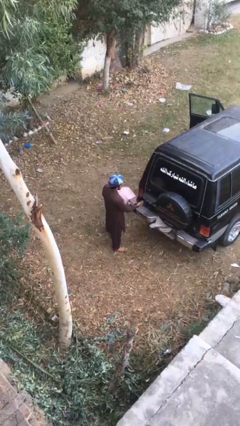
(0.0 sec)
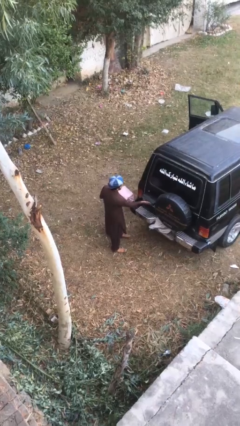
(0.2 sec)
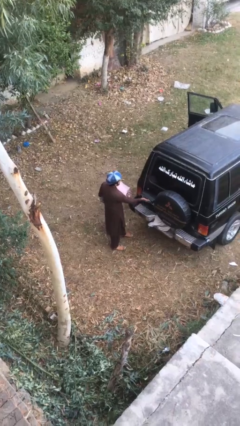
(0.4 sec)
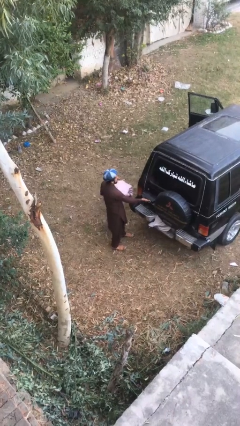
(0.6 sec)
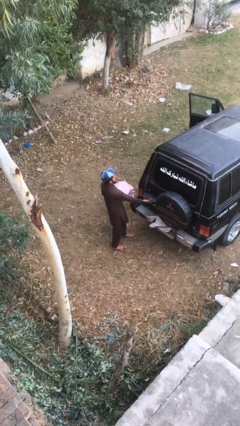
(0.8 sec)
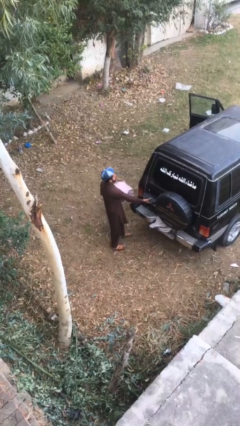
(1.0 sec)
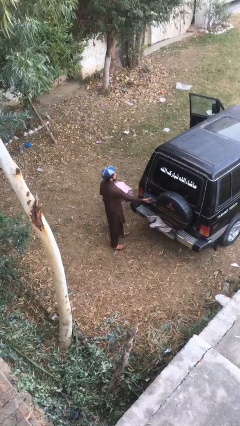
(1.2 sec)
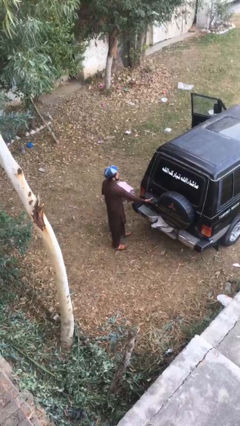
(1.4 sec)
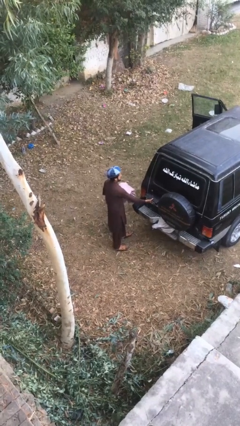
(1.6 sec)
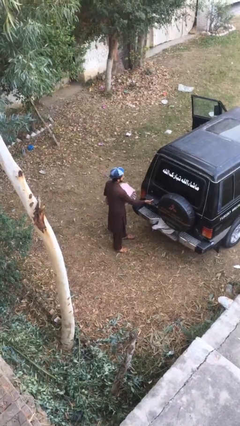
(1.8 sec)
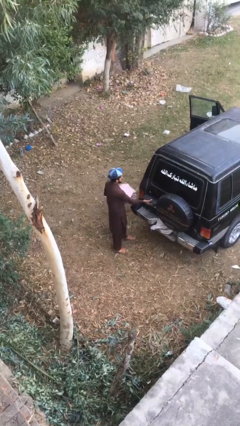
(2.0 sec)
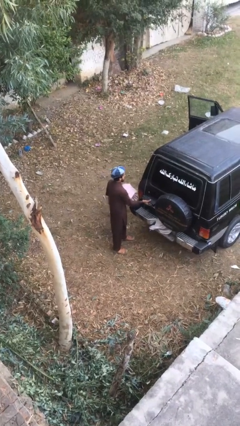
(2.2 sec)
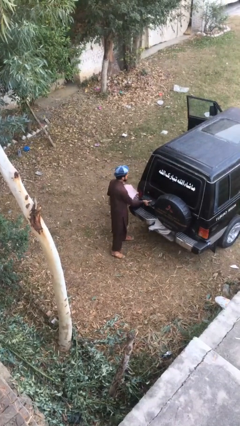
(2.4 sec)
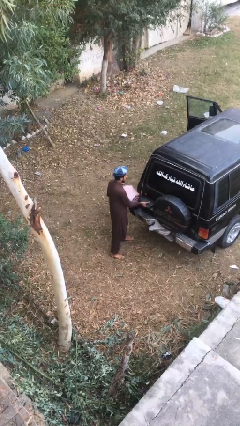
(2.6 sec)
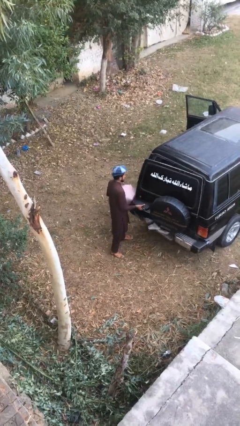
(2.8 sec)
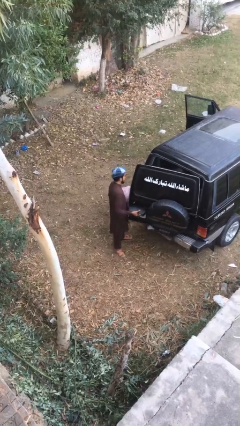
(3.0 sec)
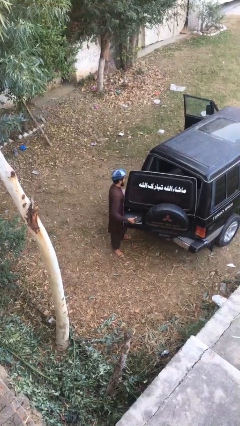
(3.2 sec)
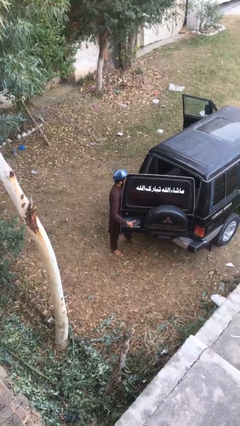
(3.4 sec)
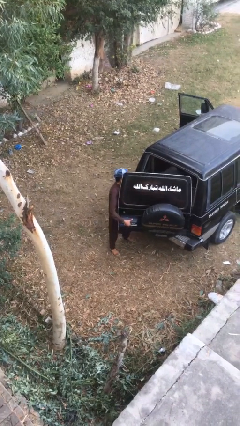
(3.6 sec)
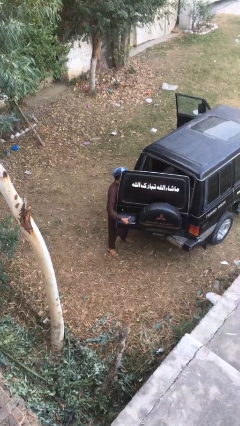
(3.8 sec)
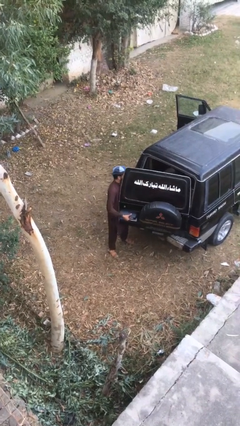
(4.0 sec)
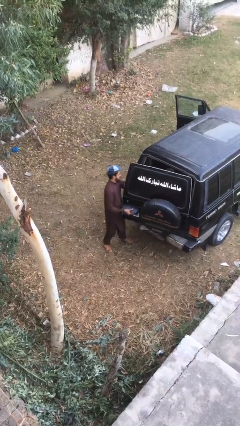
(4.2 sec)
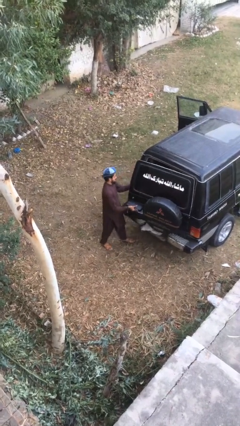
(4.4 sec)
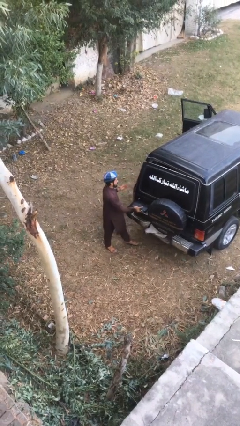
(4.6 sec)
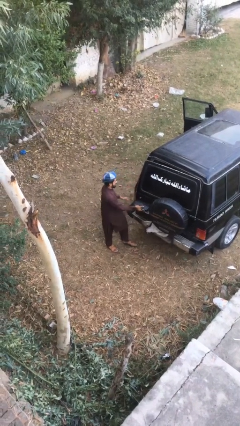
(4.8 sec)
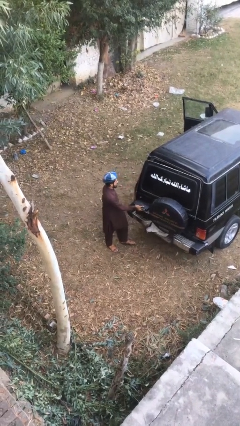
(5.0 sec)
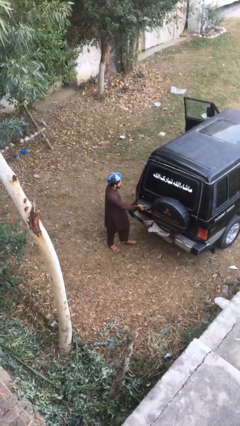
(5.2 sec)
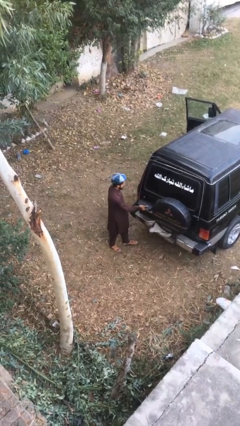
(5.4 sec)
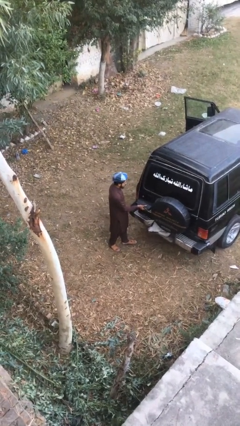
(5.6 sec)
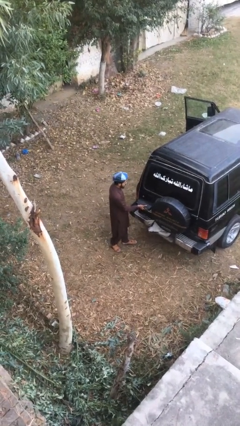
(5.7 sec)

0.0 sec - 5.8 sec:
person loads car

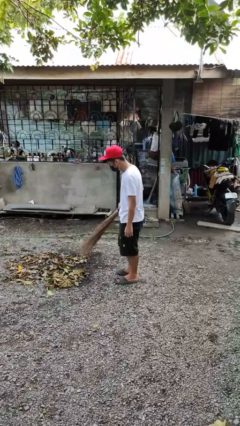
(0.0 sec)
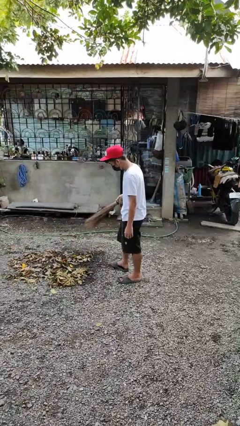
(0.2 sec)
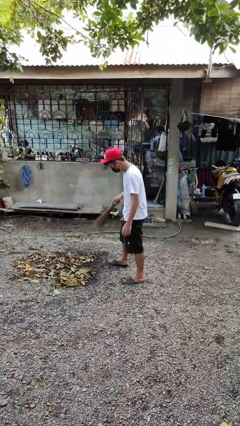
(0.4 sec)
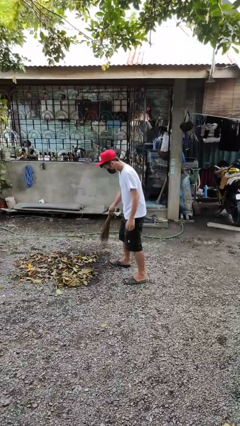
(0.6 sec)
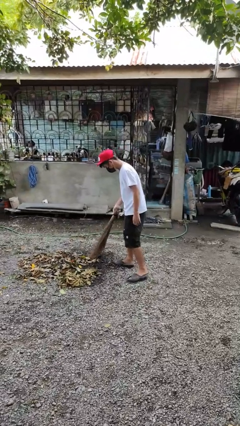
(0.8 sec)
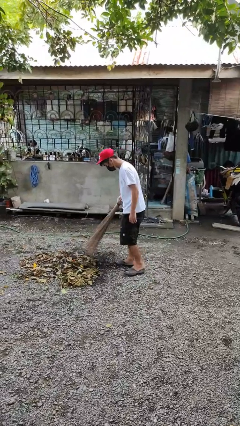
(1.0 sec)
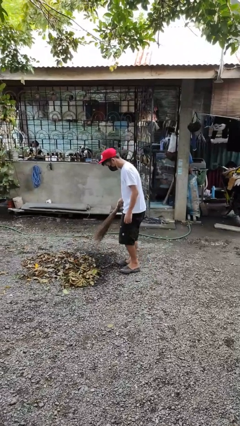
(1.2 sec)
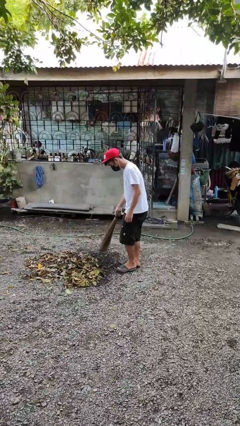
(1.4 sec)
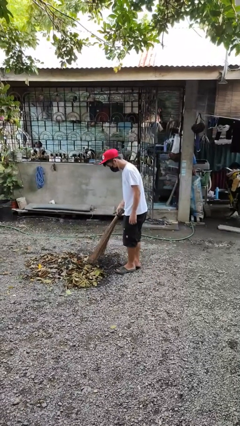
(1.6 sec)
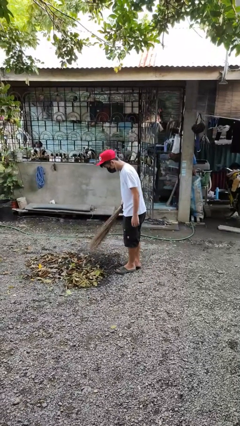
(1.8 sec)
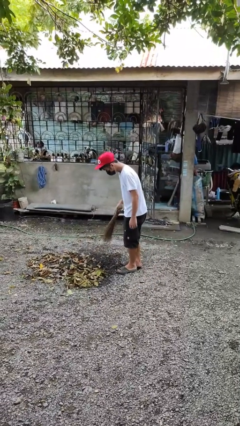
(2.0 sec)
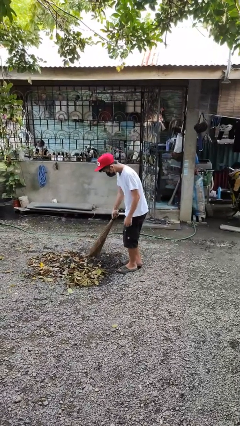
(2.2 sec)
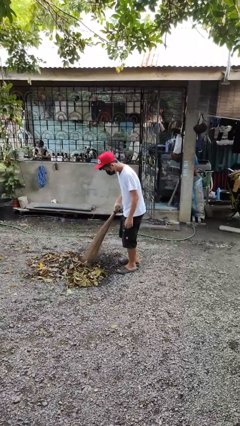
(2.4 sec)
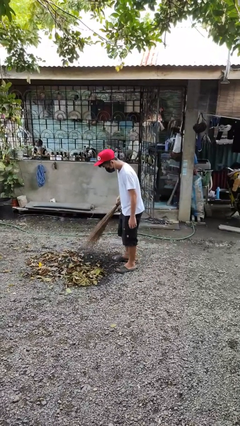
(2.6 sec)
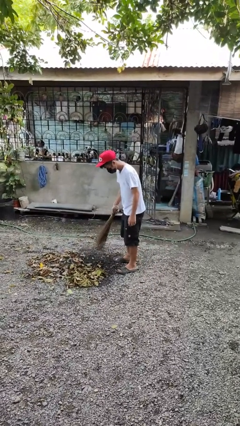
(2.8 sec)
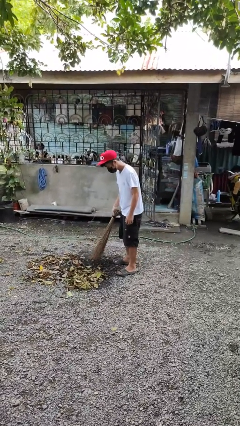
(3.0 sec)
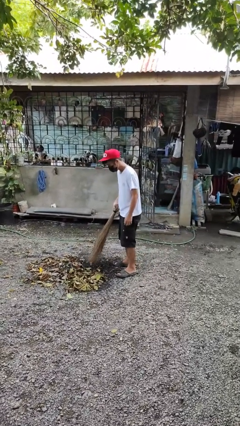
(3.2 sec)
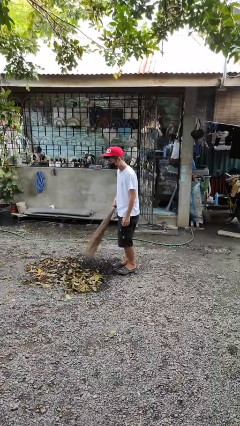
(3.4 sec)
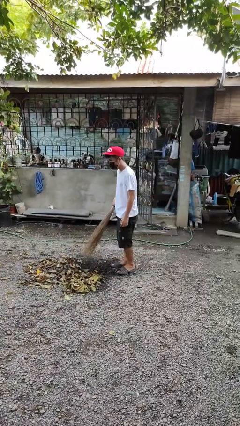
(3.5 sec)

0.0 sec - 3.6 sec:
person sweeps floor

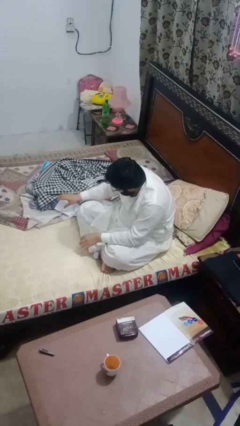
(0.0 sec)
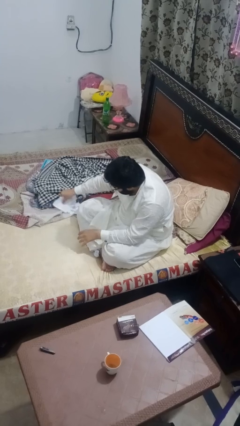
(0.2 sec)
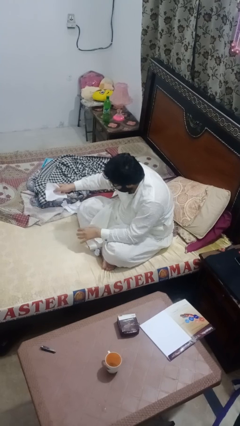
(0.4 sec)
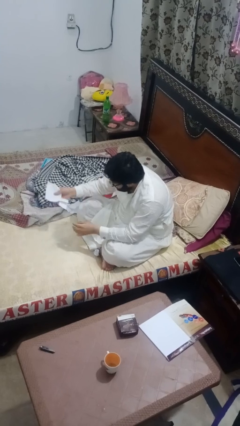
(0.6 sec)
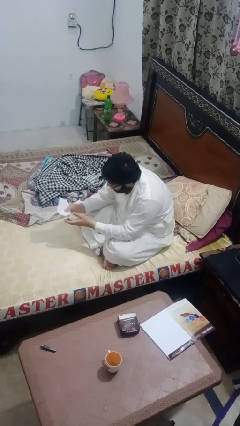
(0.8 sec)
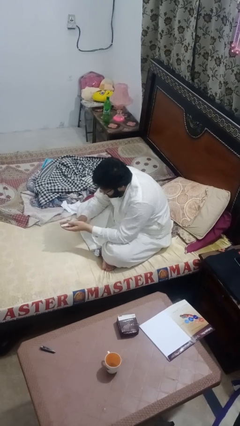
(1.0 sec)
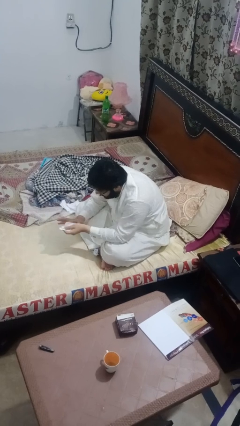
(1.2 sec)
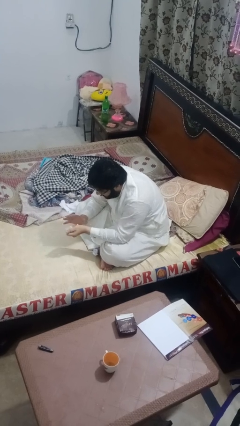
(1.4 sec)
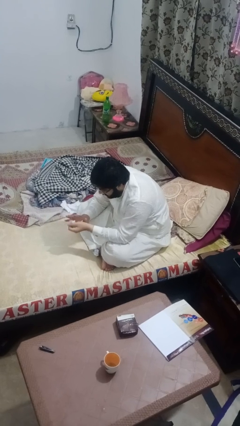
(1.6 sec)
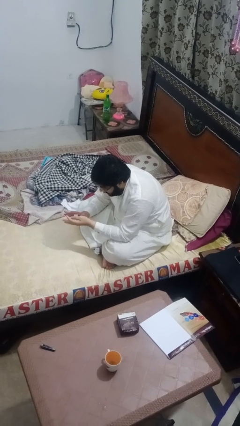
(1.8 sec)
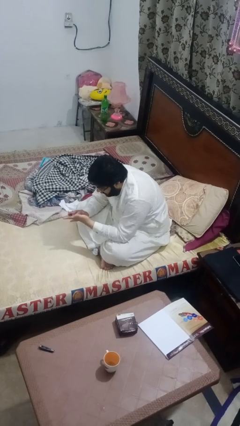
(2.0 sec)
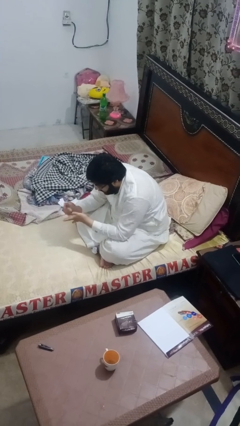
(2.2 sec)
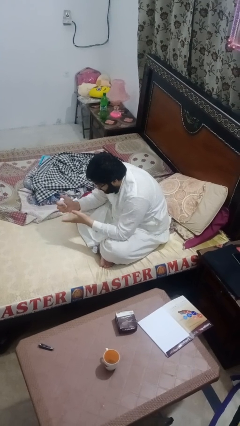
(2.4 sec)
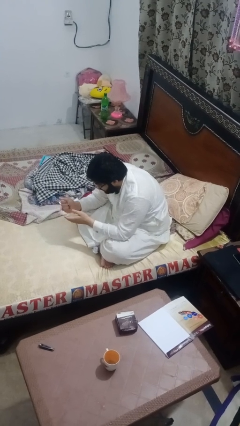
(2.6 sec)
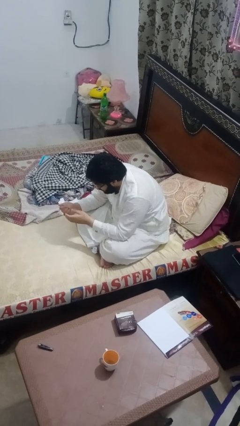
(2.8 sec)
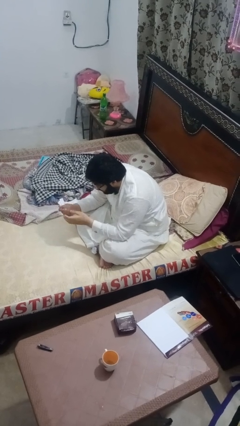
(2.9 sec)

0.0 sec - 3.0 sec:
person crumples paper

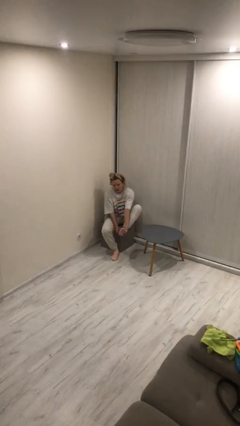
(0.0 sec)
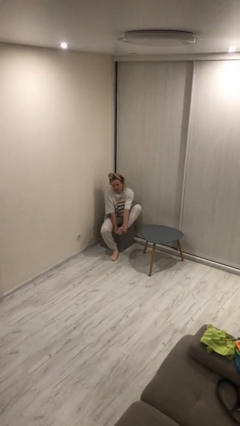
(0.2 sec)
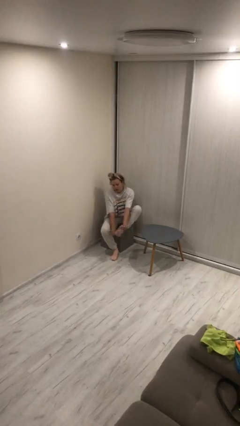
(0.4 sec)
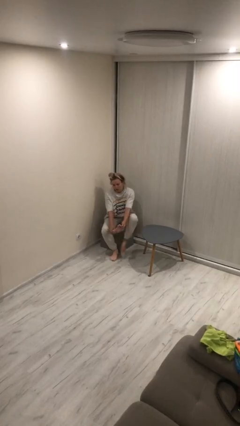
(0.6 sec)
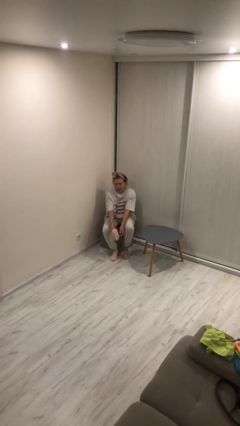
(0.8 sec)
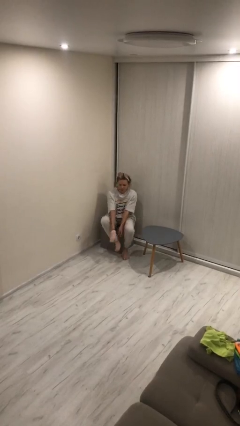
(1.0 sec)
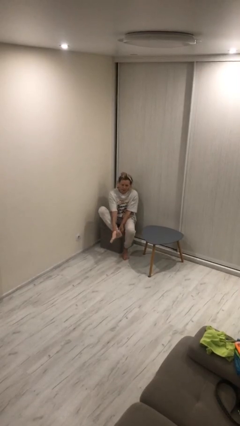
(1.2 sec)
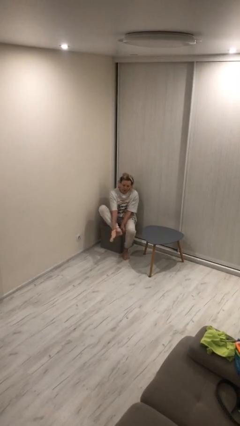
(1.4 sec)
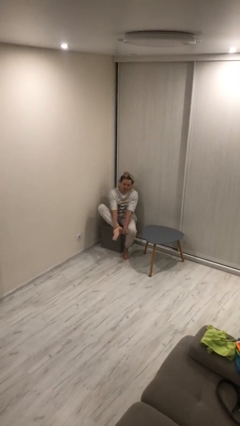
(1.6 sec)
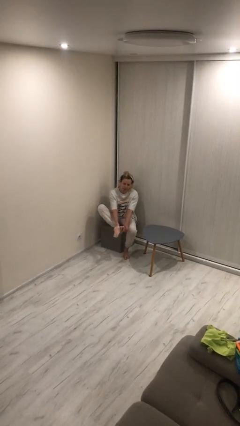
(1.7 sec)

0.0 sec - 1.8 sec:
person takes off socks

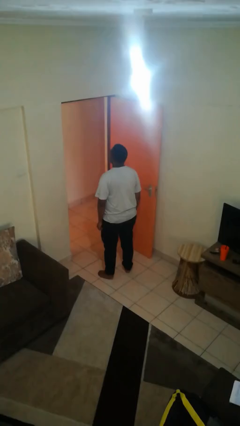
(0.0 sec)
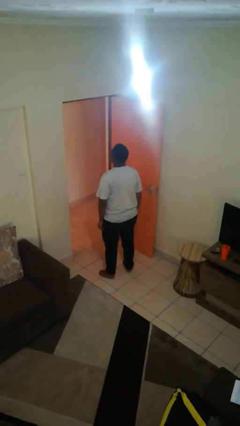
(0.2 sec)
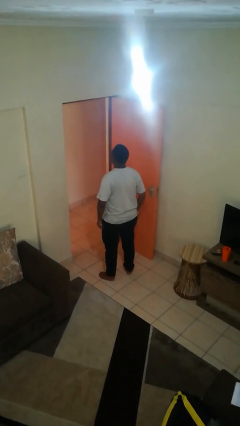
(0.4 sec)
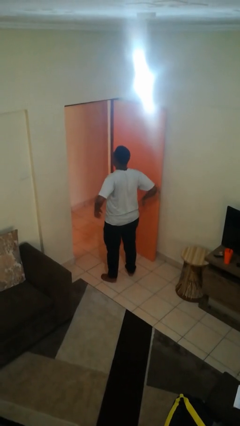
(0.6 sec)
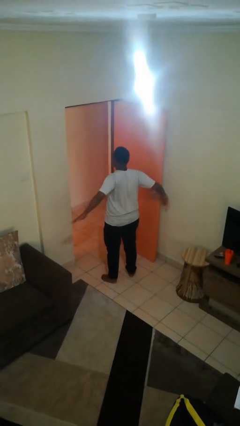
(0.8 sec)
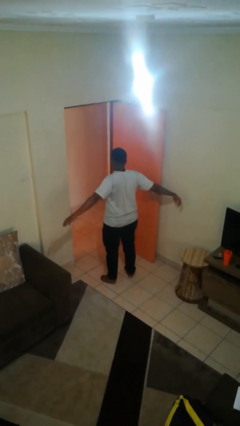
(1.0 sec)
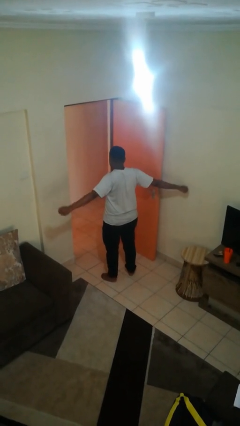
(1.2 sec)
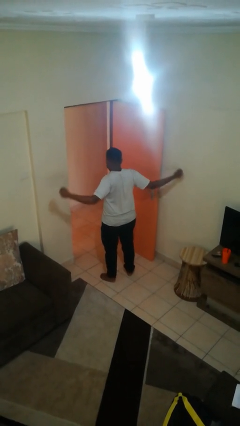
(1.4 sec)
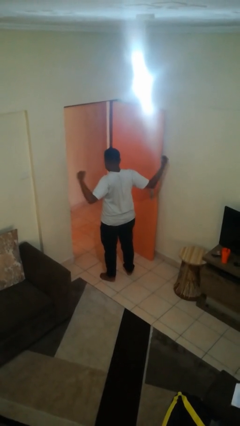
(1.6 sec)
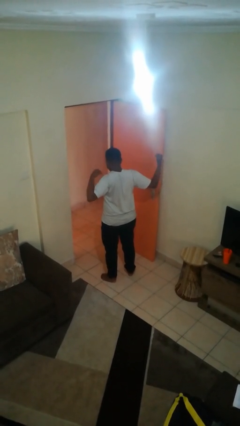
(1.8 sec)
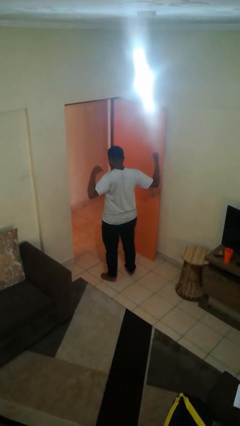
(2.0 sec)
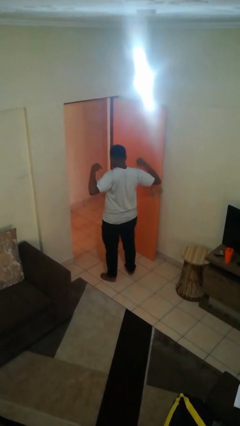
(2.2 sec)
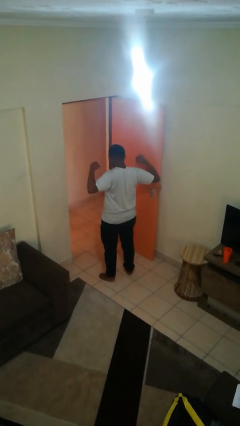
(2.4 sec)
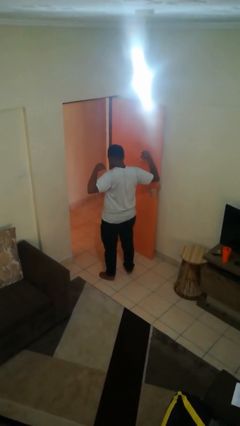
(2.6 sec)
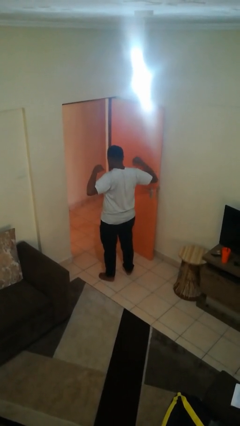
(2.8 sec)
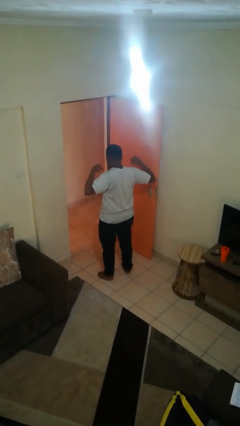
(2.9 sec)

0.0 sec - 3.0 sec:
person stretches arms to side

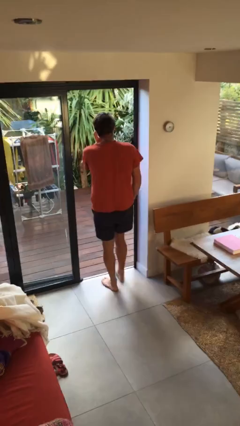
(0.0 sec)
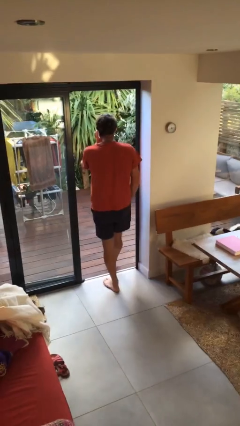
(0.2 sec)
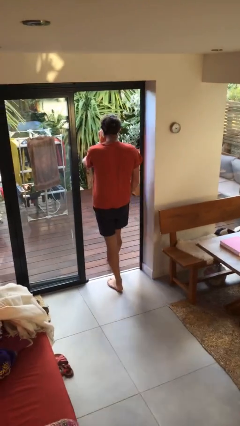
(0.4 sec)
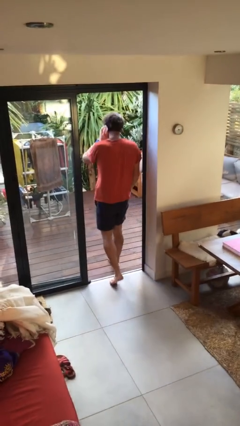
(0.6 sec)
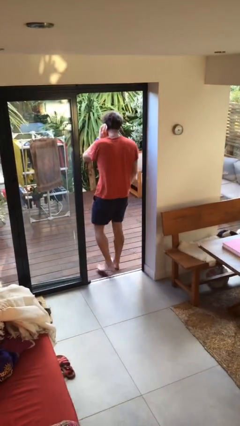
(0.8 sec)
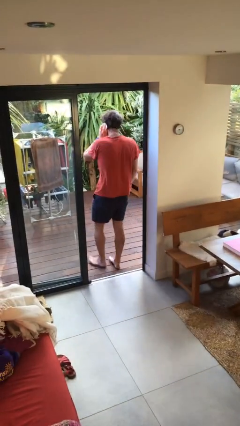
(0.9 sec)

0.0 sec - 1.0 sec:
person exits scene through structure
